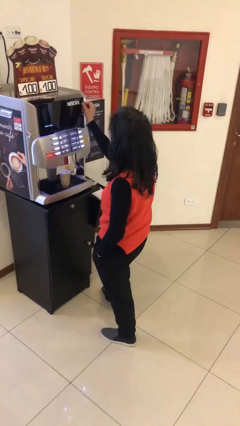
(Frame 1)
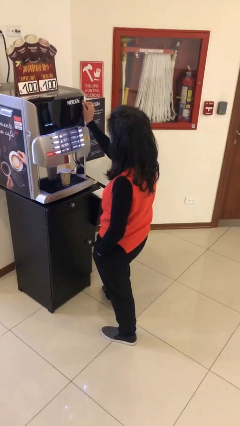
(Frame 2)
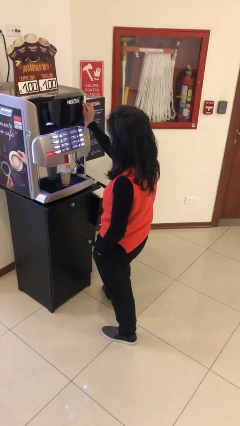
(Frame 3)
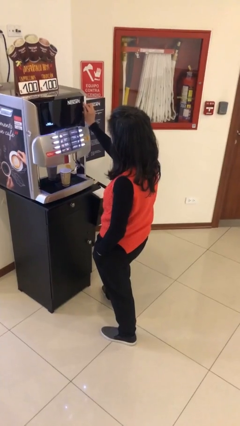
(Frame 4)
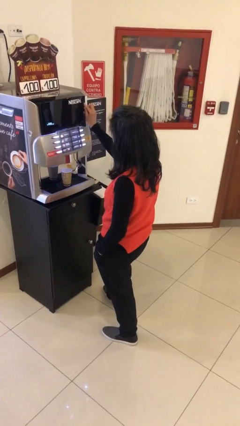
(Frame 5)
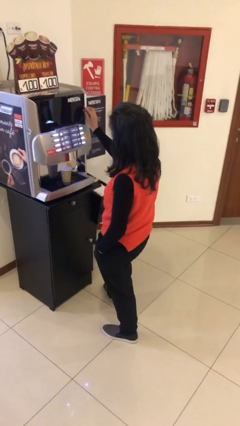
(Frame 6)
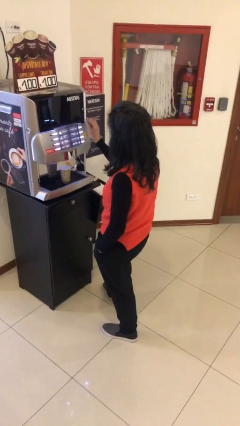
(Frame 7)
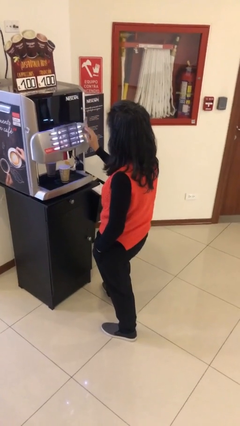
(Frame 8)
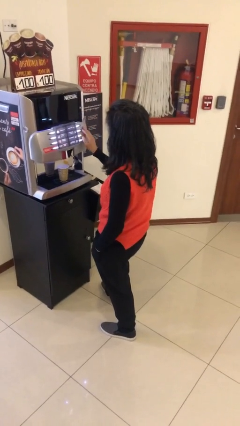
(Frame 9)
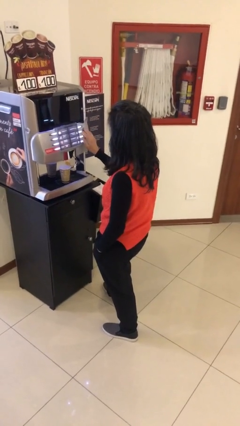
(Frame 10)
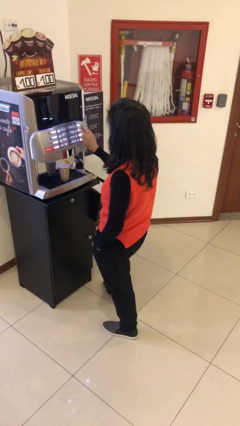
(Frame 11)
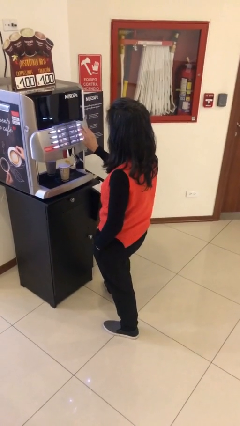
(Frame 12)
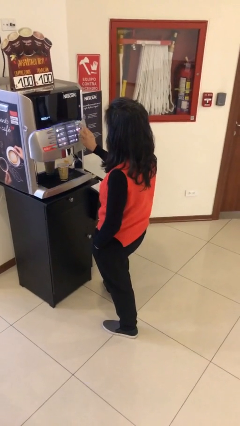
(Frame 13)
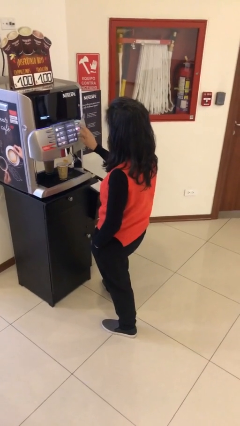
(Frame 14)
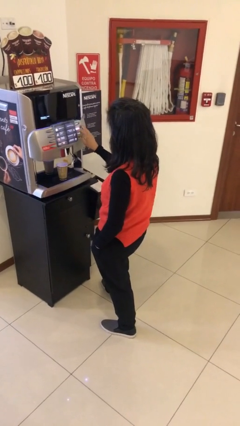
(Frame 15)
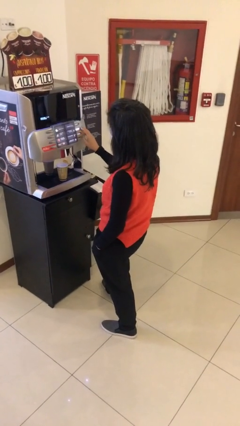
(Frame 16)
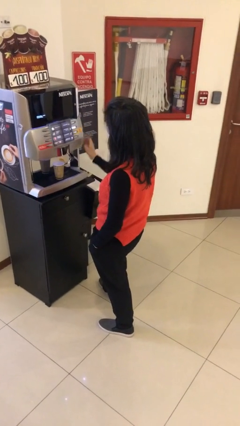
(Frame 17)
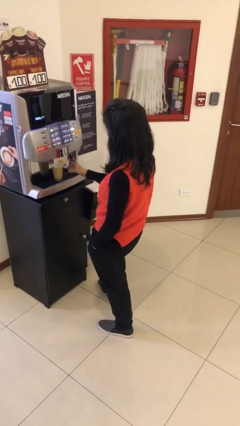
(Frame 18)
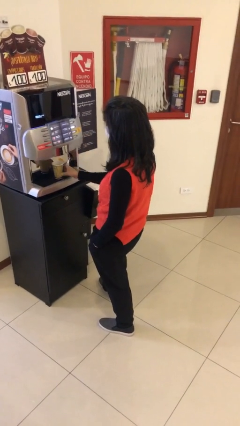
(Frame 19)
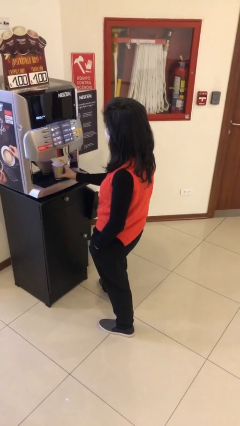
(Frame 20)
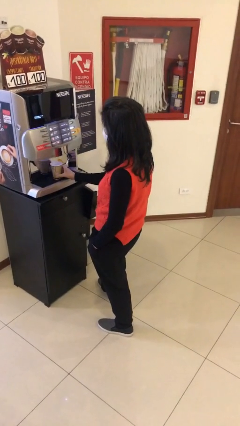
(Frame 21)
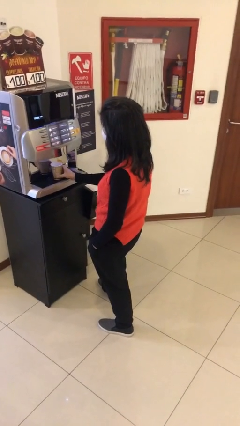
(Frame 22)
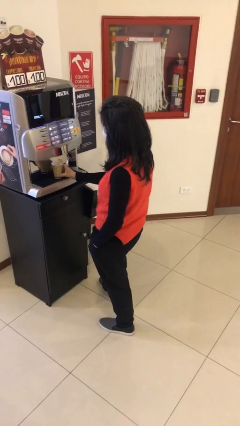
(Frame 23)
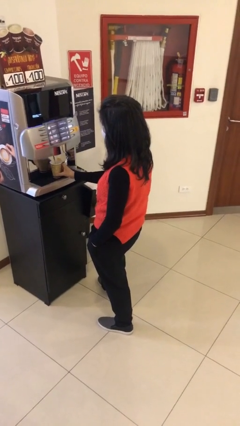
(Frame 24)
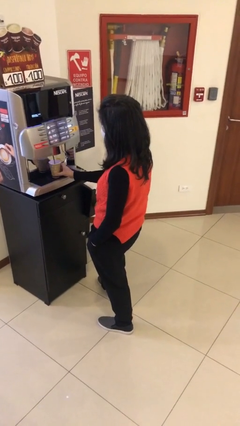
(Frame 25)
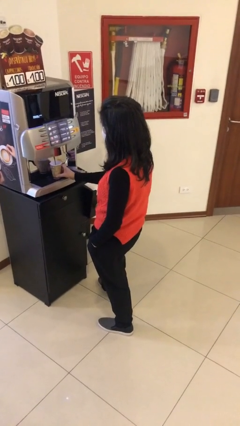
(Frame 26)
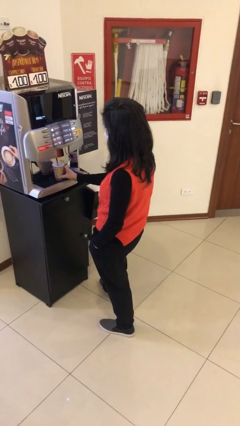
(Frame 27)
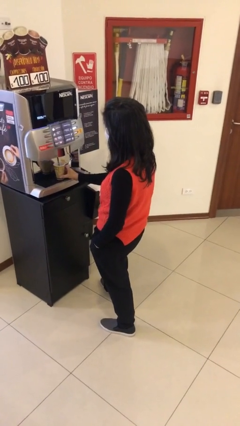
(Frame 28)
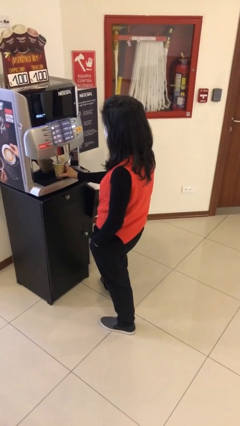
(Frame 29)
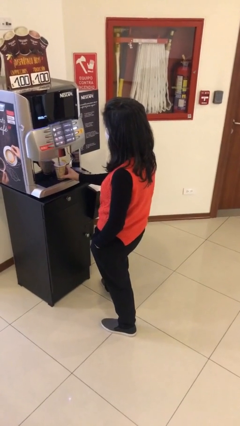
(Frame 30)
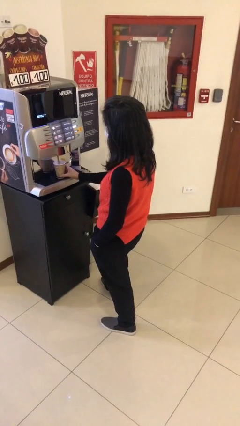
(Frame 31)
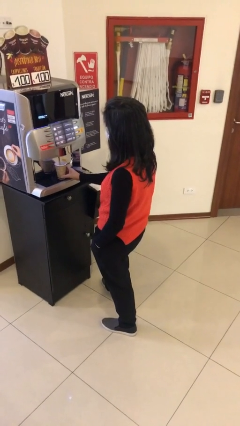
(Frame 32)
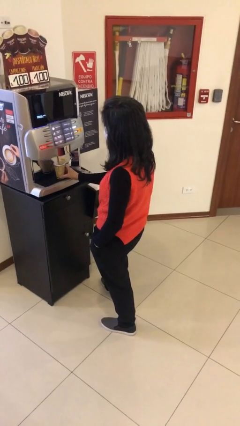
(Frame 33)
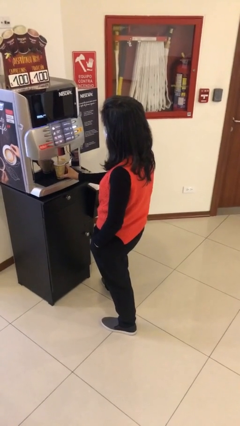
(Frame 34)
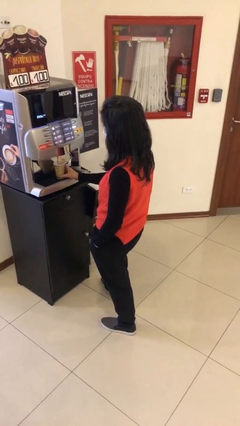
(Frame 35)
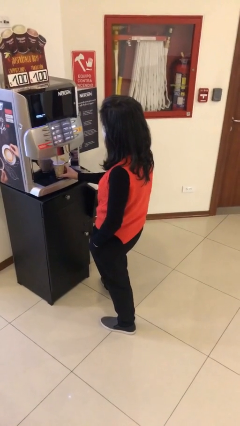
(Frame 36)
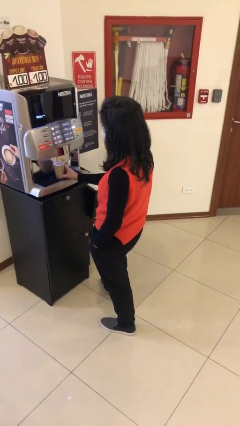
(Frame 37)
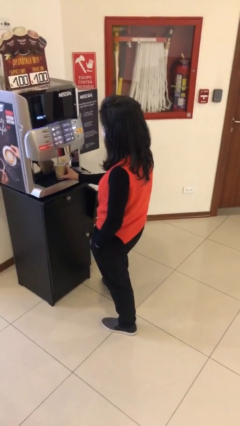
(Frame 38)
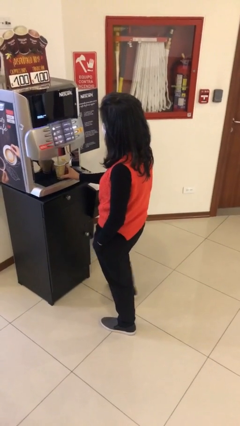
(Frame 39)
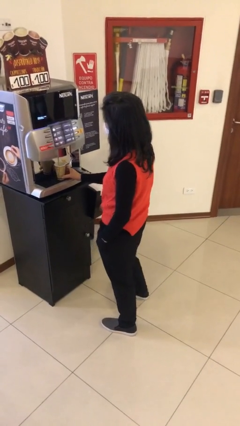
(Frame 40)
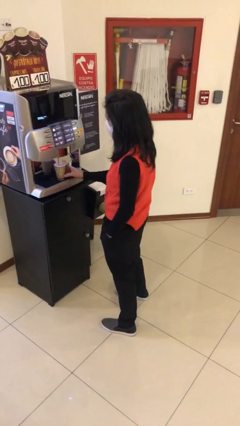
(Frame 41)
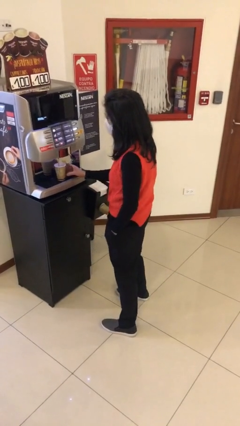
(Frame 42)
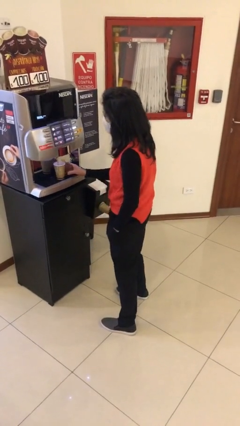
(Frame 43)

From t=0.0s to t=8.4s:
person purchases from machine

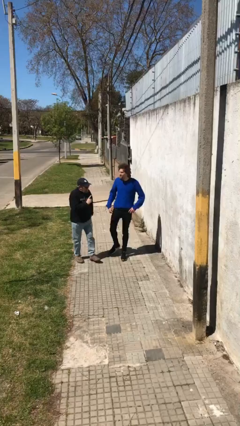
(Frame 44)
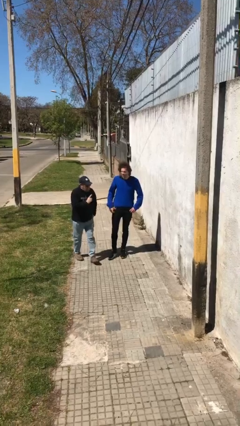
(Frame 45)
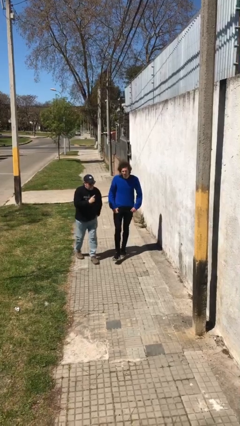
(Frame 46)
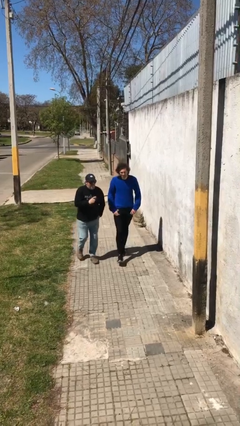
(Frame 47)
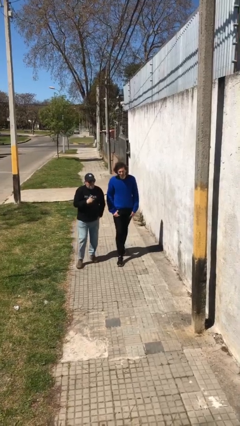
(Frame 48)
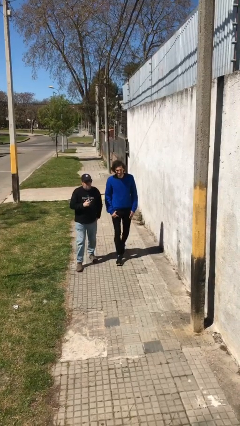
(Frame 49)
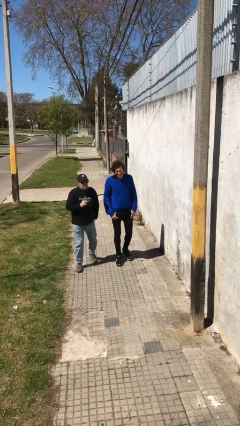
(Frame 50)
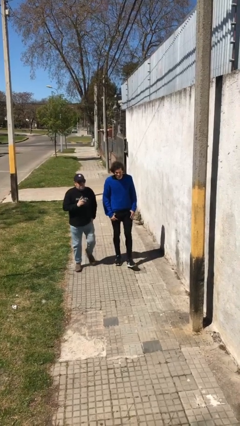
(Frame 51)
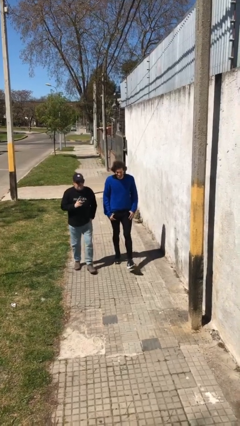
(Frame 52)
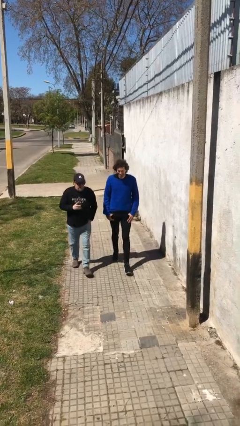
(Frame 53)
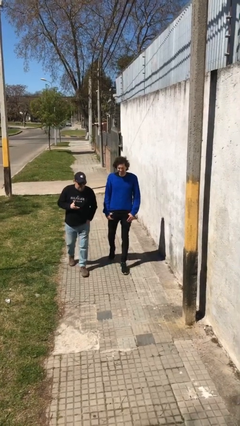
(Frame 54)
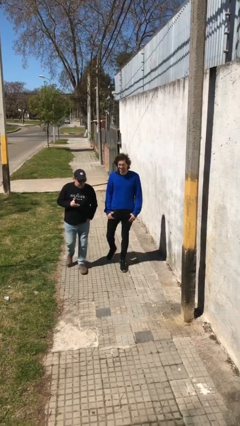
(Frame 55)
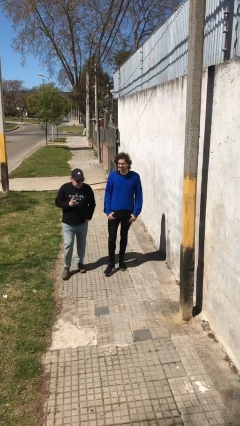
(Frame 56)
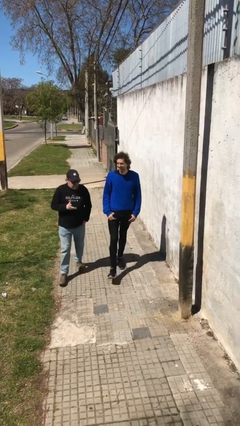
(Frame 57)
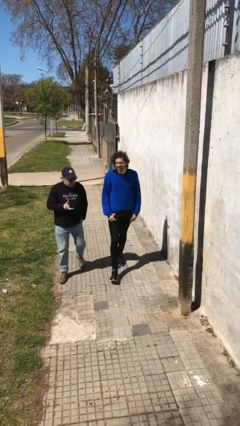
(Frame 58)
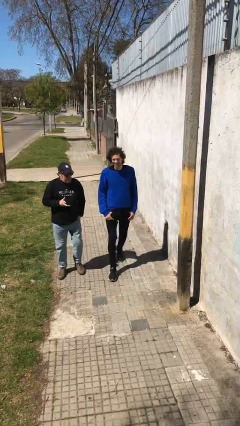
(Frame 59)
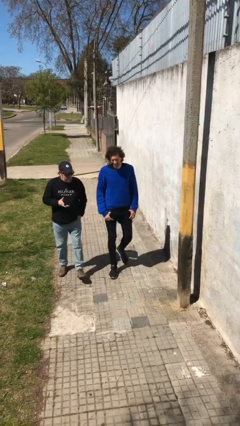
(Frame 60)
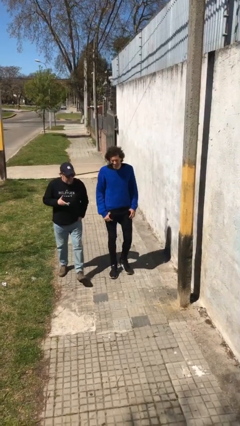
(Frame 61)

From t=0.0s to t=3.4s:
person talks to person

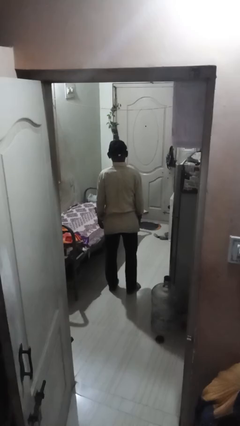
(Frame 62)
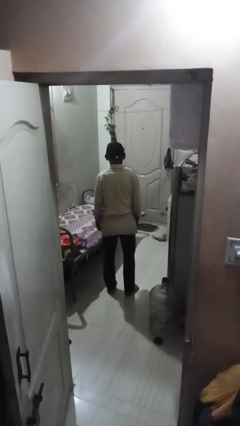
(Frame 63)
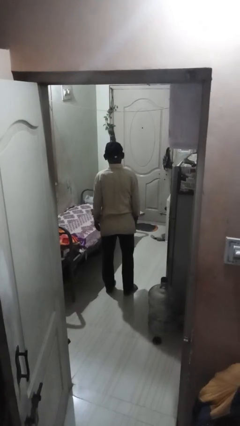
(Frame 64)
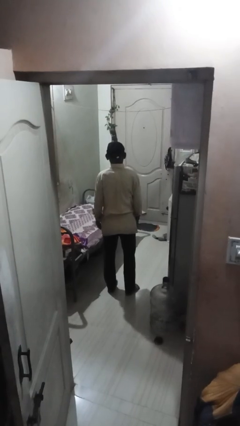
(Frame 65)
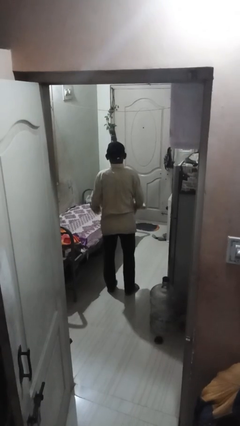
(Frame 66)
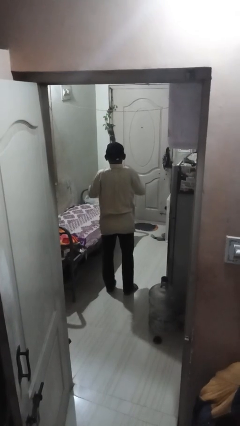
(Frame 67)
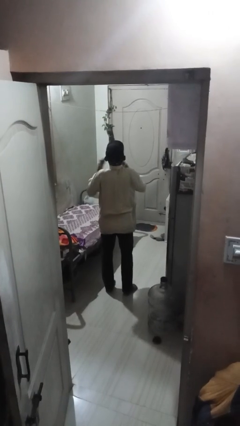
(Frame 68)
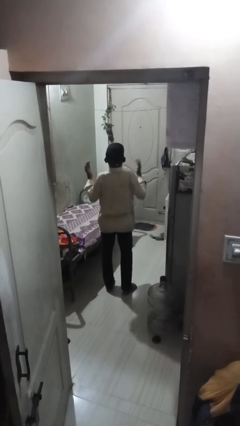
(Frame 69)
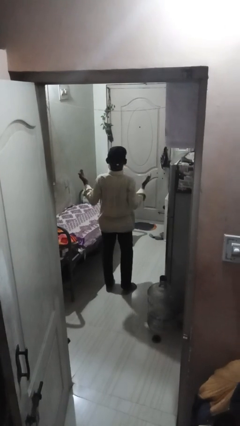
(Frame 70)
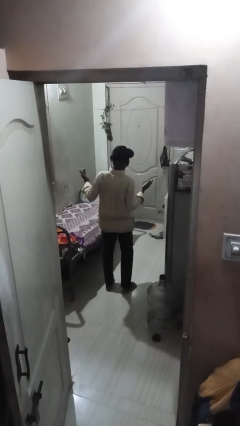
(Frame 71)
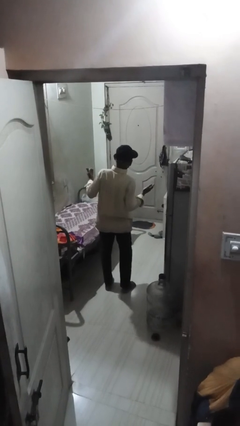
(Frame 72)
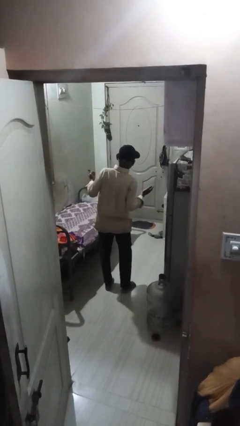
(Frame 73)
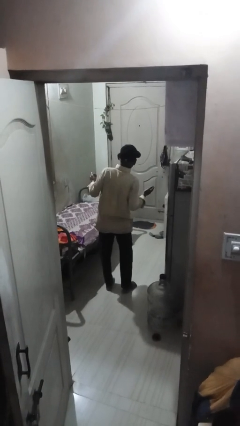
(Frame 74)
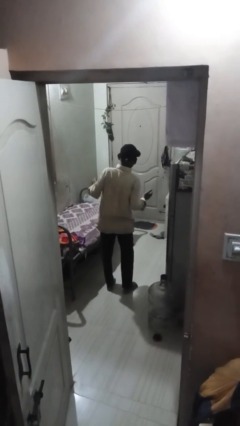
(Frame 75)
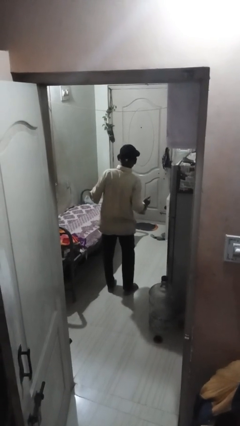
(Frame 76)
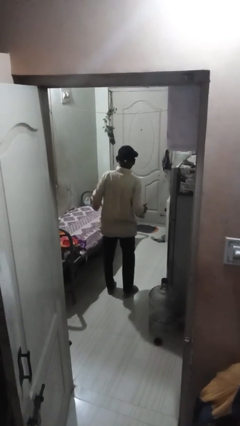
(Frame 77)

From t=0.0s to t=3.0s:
person shrugs

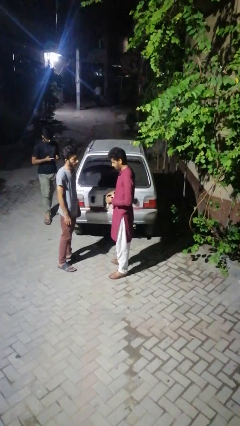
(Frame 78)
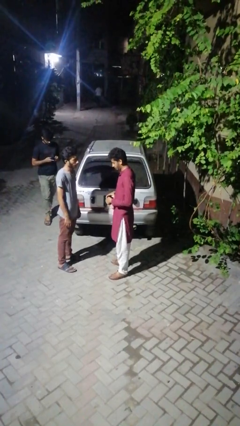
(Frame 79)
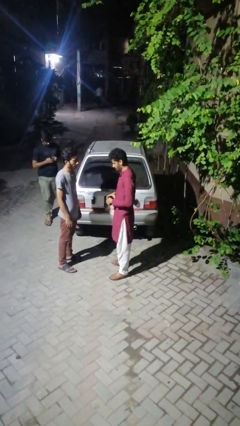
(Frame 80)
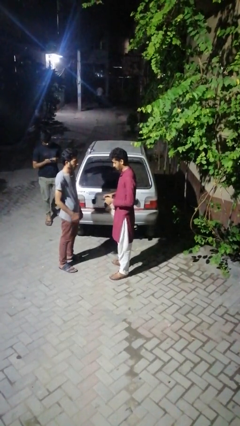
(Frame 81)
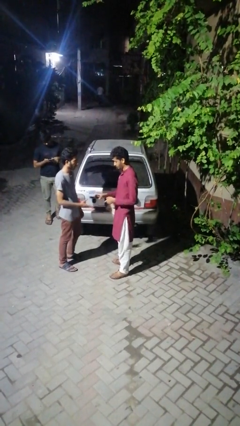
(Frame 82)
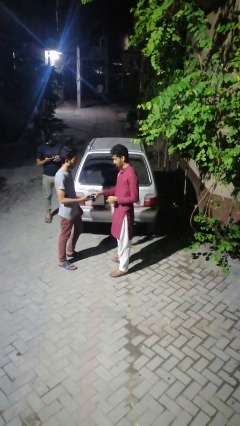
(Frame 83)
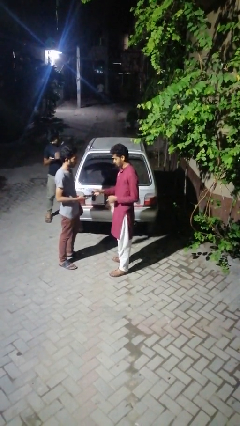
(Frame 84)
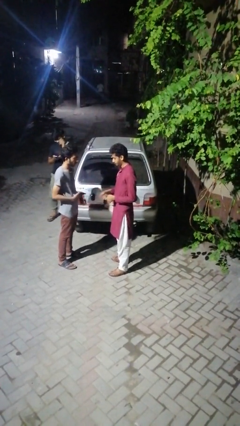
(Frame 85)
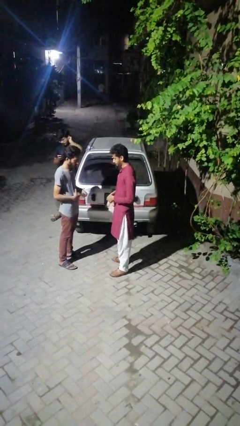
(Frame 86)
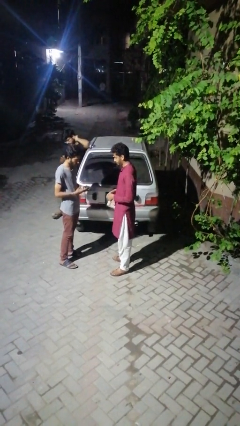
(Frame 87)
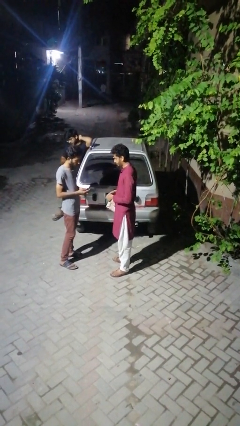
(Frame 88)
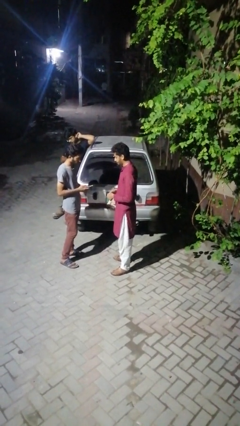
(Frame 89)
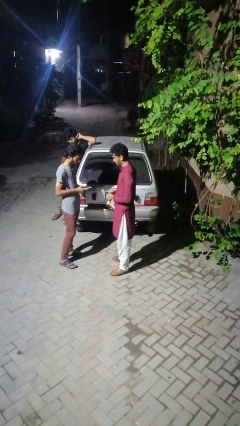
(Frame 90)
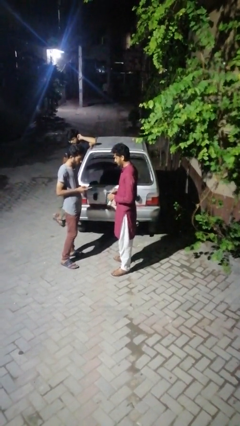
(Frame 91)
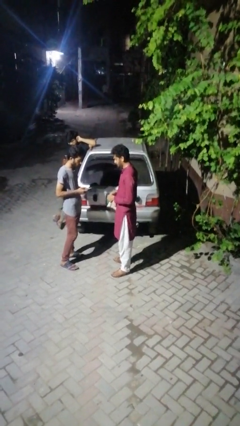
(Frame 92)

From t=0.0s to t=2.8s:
person transfers object to person

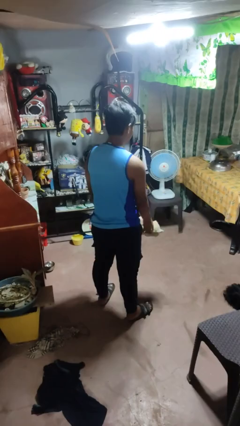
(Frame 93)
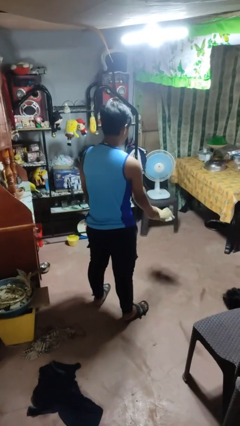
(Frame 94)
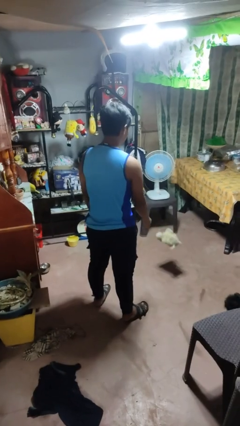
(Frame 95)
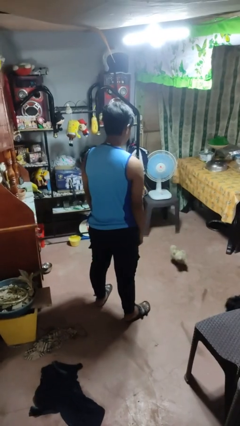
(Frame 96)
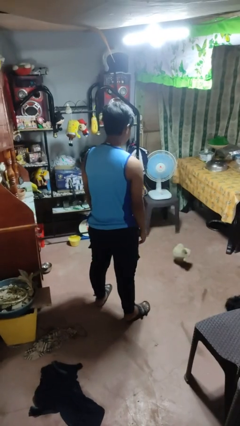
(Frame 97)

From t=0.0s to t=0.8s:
person throws object to ground
